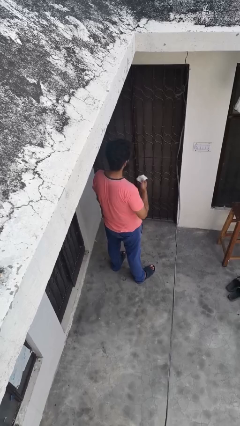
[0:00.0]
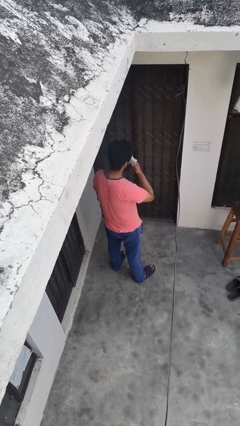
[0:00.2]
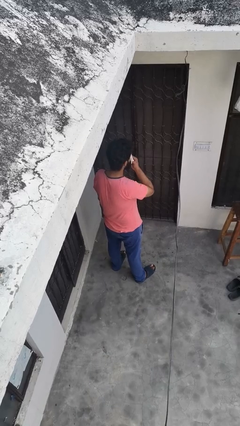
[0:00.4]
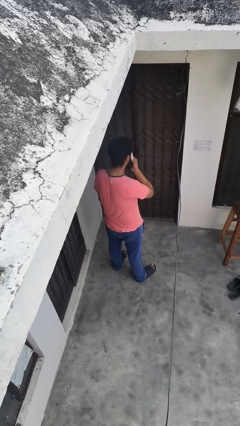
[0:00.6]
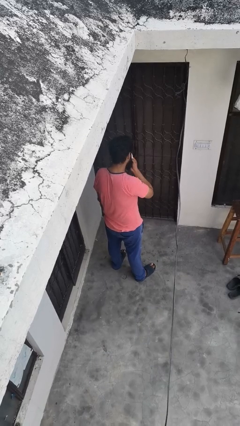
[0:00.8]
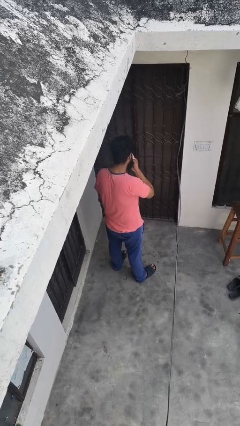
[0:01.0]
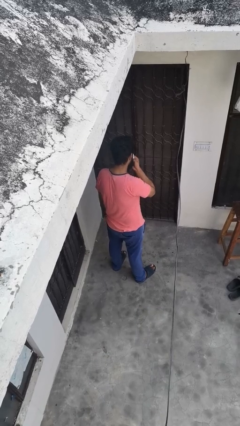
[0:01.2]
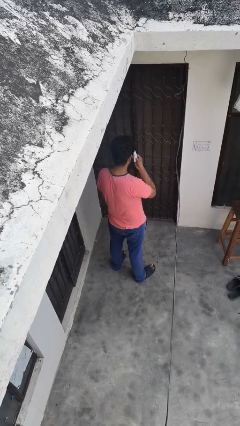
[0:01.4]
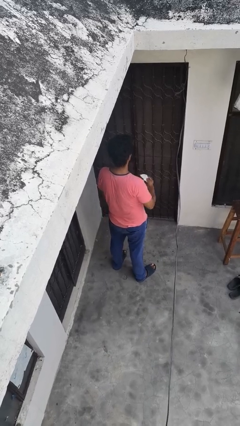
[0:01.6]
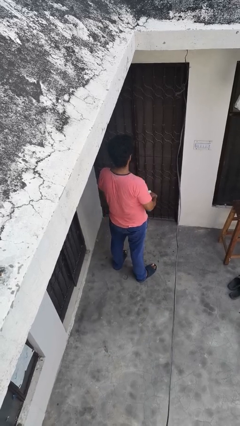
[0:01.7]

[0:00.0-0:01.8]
person wipes mouth with napkin

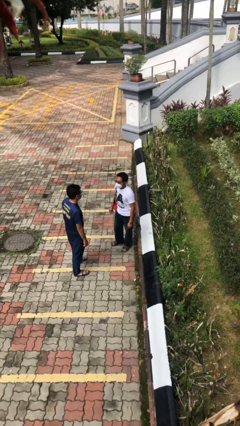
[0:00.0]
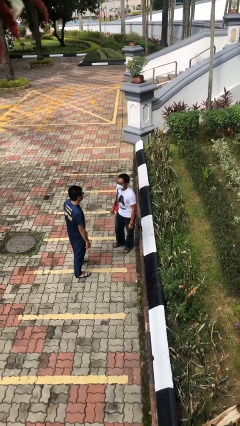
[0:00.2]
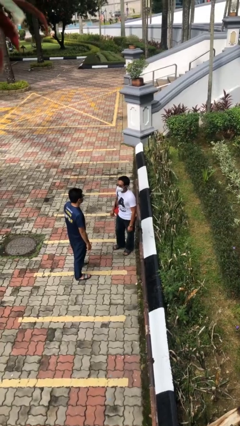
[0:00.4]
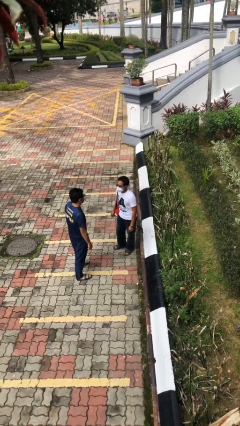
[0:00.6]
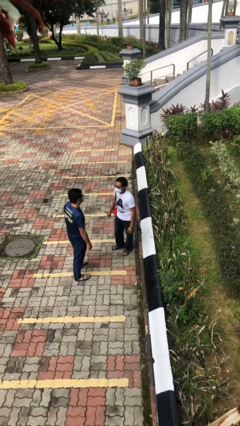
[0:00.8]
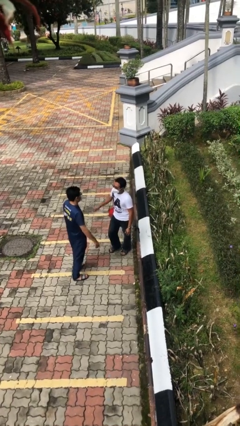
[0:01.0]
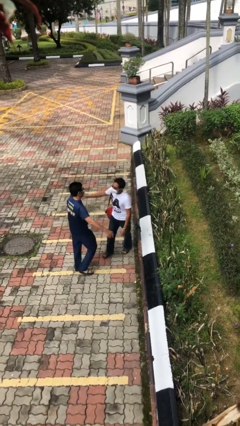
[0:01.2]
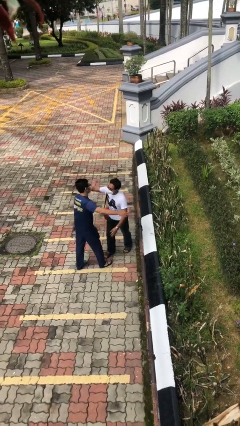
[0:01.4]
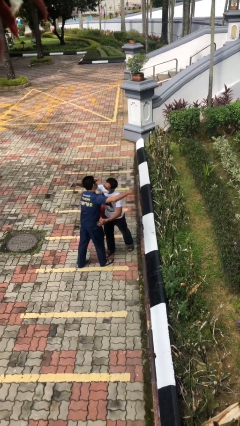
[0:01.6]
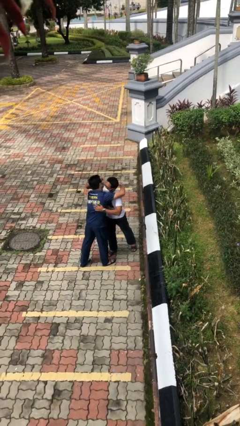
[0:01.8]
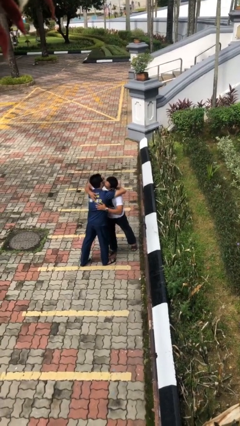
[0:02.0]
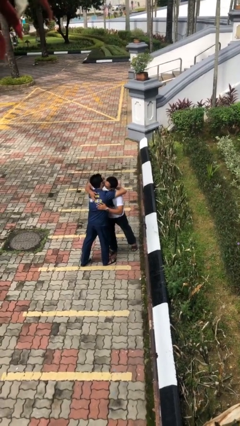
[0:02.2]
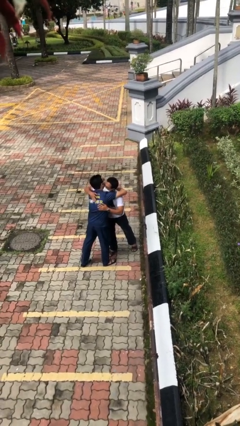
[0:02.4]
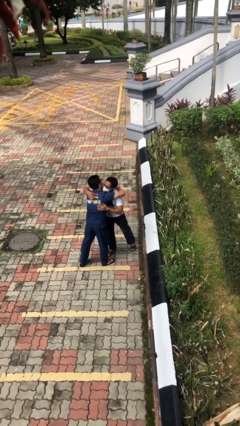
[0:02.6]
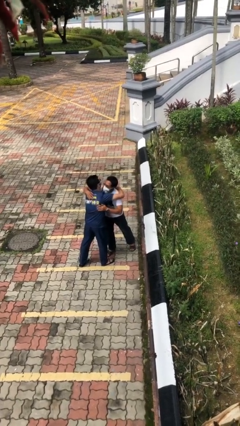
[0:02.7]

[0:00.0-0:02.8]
person embraces person

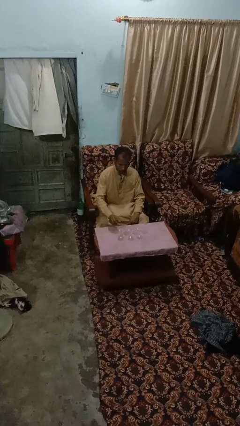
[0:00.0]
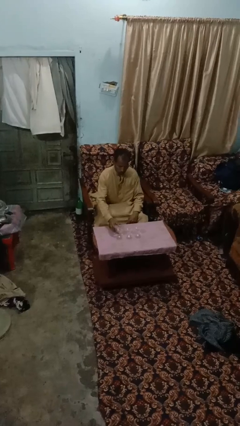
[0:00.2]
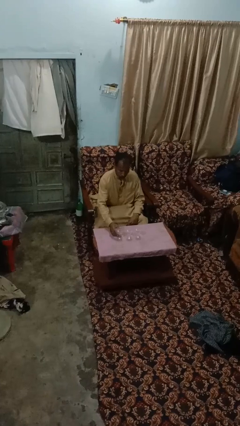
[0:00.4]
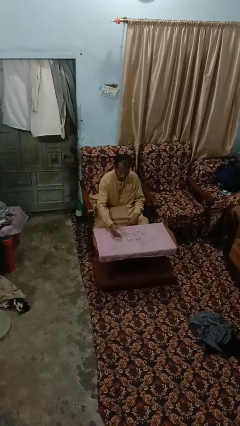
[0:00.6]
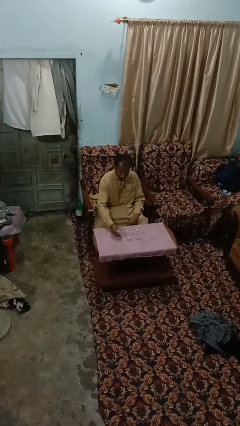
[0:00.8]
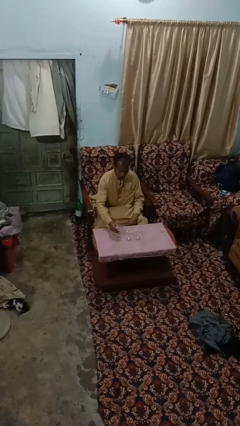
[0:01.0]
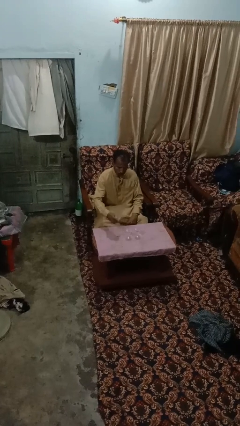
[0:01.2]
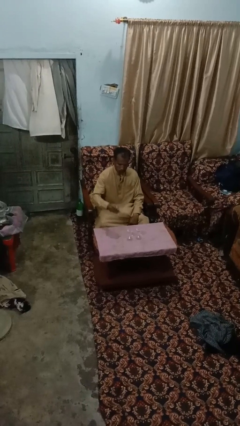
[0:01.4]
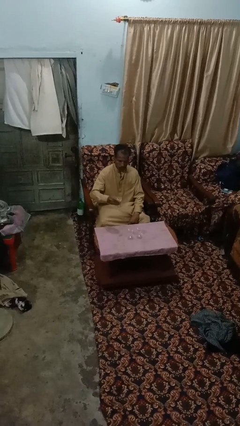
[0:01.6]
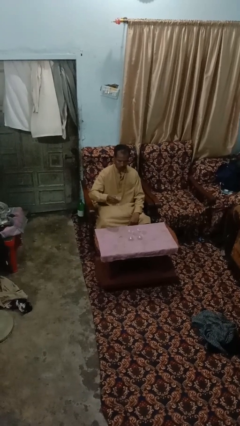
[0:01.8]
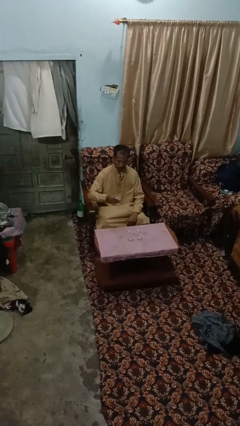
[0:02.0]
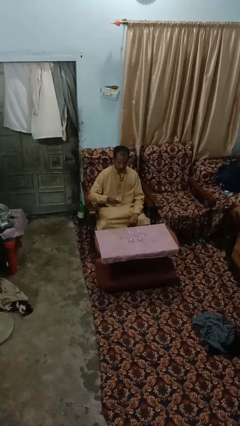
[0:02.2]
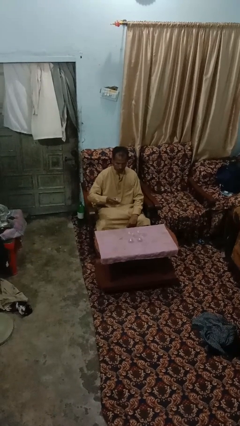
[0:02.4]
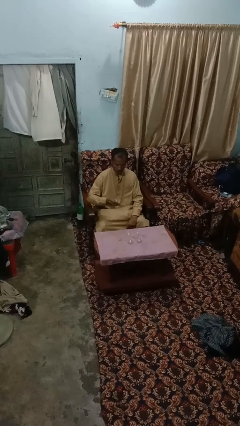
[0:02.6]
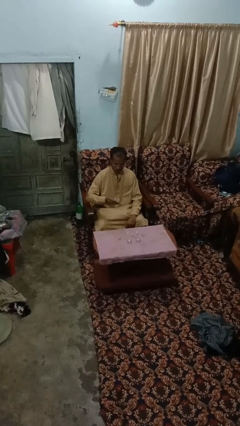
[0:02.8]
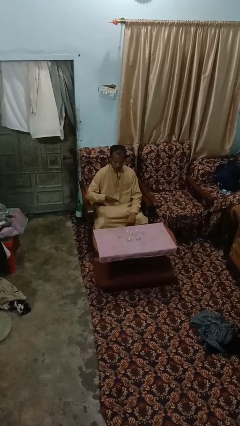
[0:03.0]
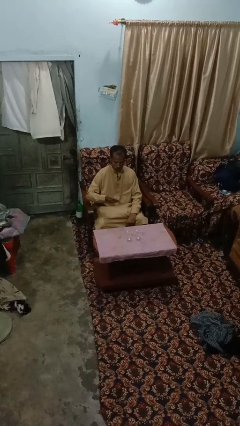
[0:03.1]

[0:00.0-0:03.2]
person picks up object from table

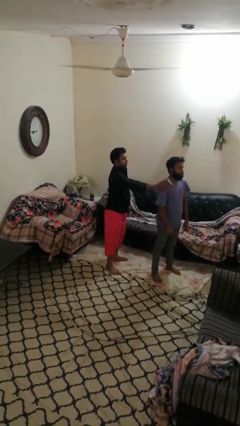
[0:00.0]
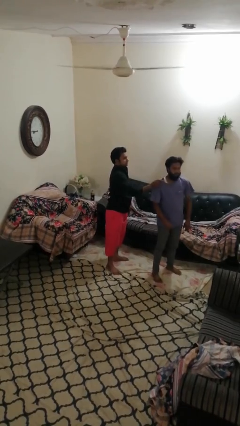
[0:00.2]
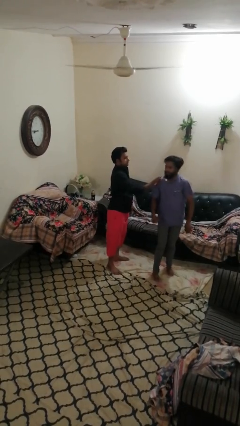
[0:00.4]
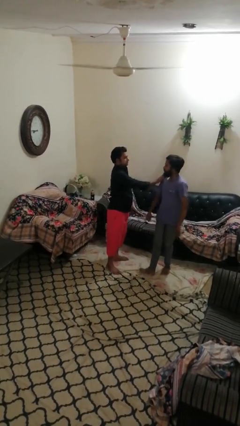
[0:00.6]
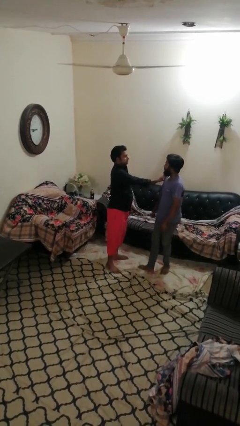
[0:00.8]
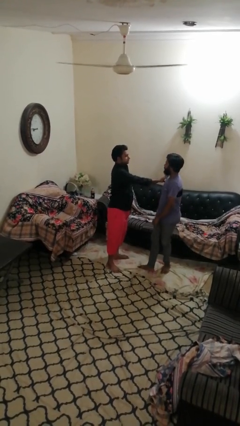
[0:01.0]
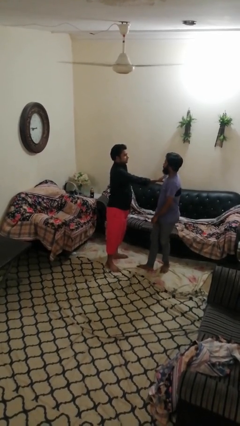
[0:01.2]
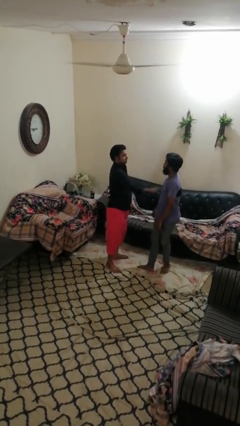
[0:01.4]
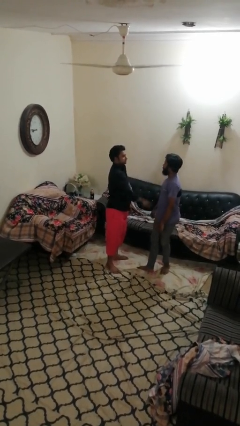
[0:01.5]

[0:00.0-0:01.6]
person spins person around

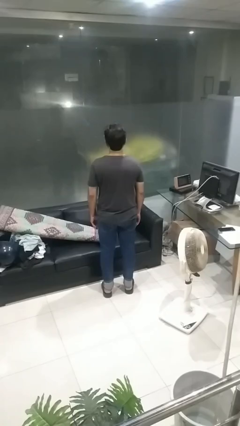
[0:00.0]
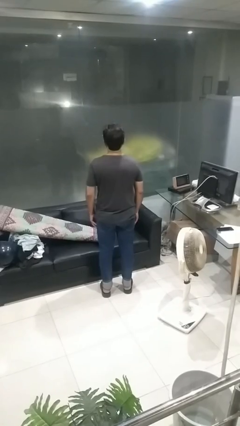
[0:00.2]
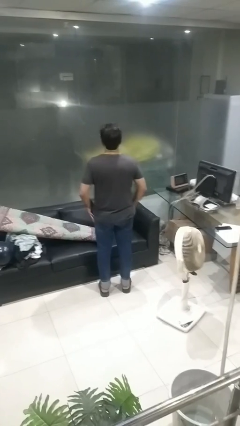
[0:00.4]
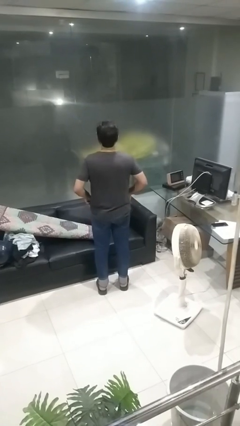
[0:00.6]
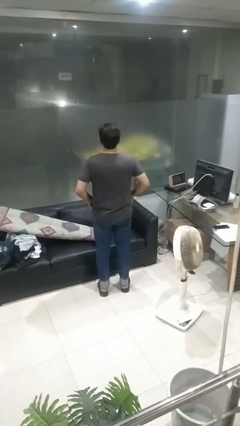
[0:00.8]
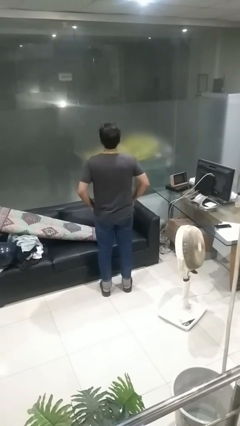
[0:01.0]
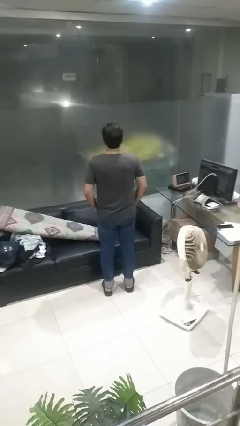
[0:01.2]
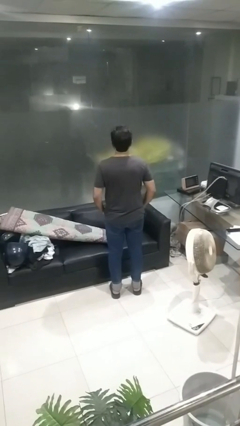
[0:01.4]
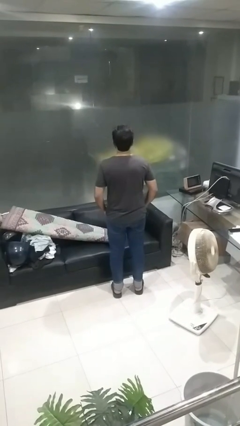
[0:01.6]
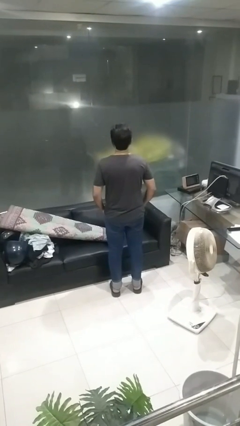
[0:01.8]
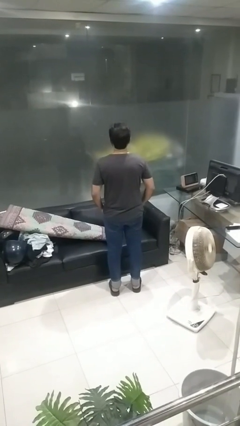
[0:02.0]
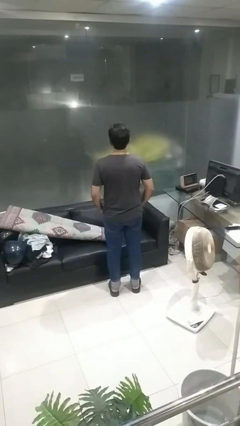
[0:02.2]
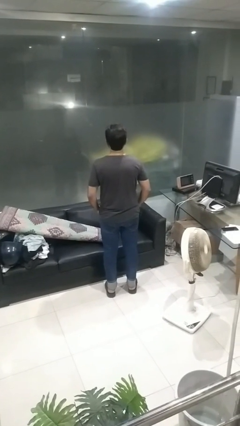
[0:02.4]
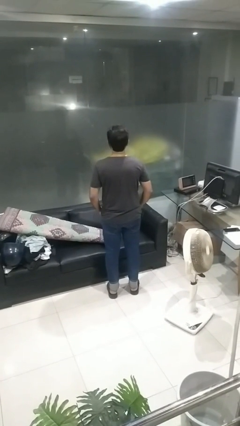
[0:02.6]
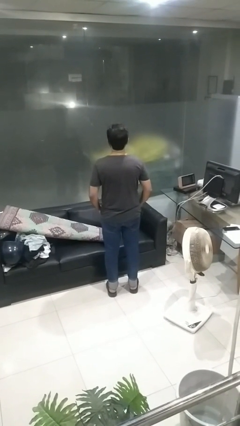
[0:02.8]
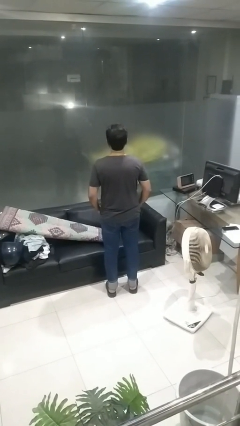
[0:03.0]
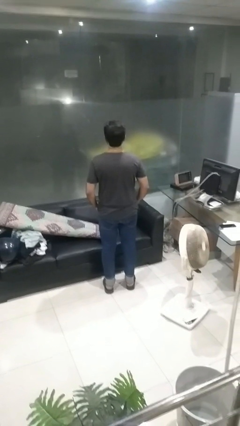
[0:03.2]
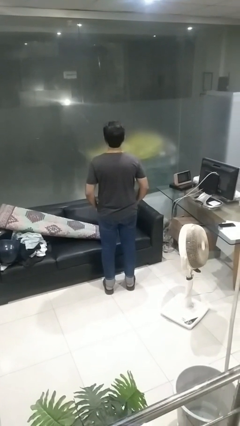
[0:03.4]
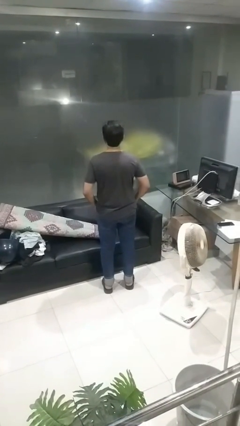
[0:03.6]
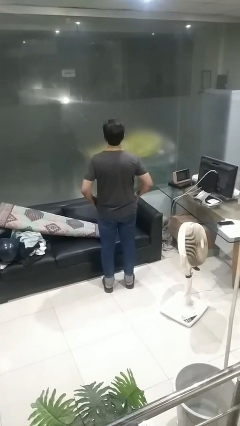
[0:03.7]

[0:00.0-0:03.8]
person puts hands in back pockets

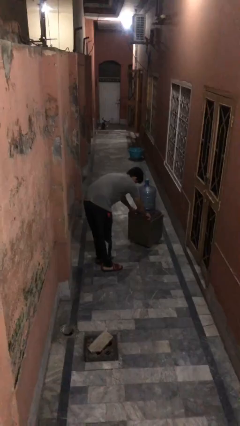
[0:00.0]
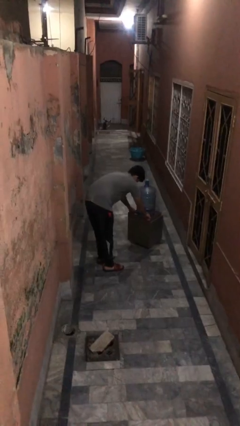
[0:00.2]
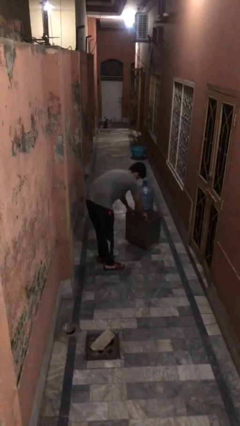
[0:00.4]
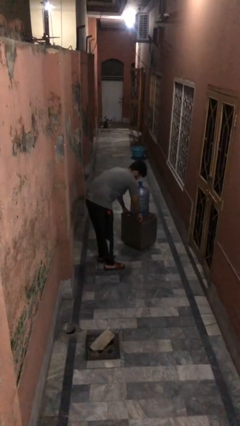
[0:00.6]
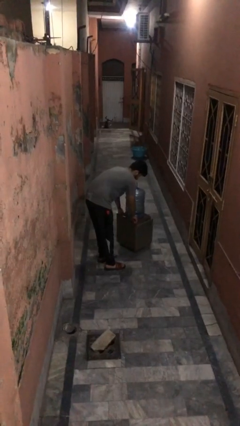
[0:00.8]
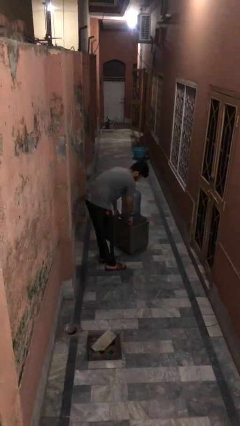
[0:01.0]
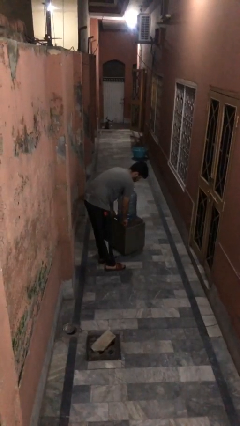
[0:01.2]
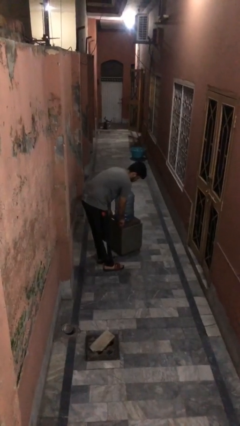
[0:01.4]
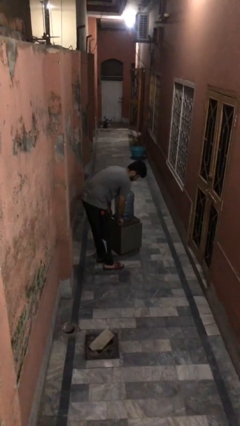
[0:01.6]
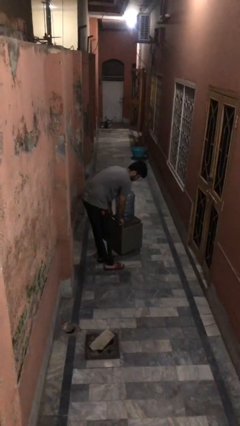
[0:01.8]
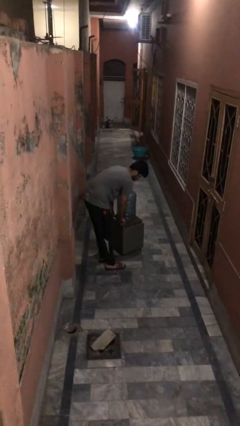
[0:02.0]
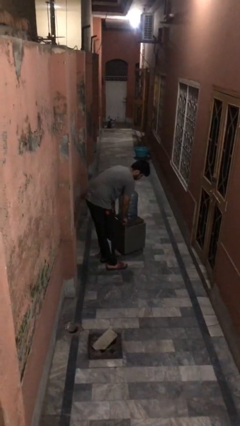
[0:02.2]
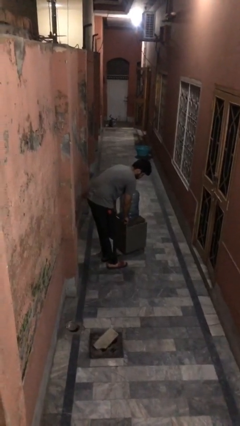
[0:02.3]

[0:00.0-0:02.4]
person pulls wheeled cart

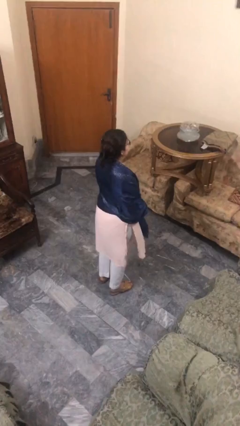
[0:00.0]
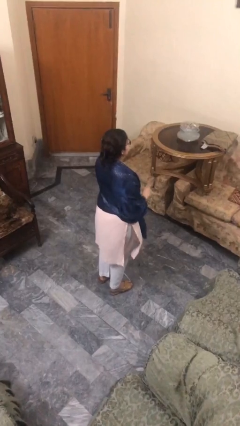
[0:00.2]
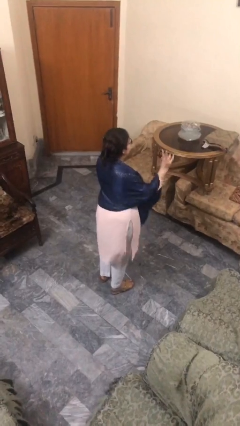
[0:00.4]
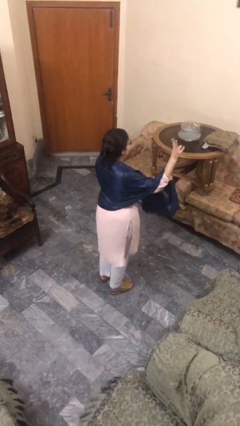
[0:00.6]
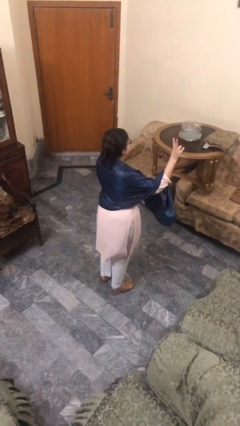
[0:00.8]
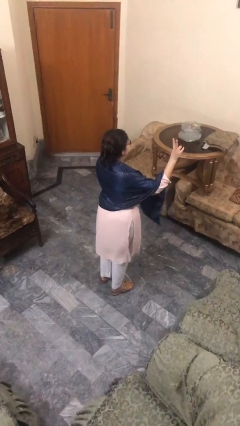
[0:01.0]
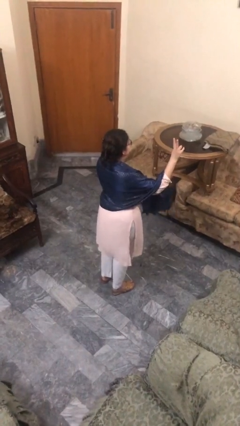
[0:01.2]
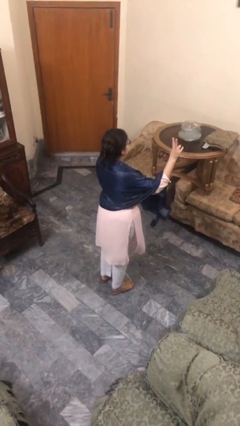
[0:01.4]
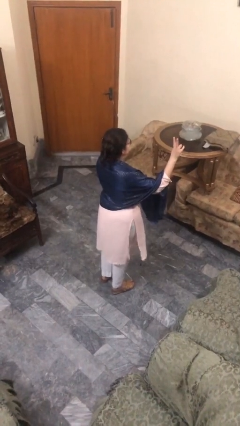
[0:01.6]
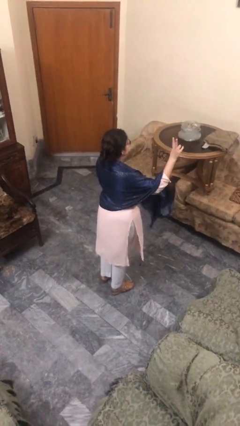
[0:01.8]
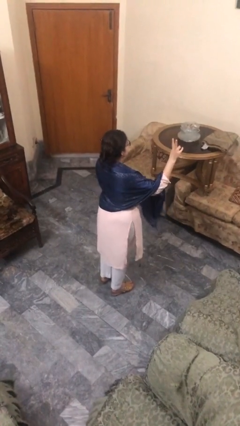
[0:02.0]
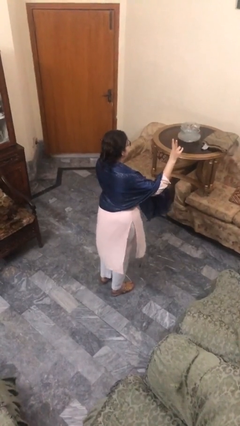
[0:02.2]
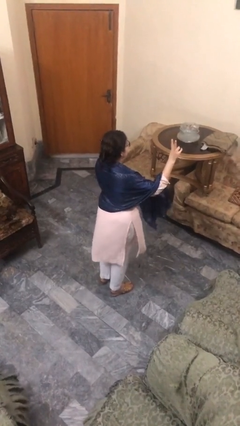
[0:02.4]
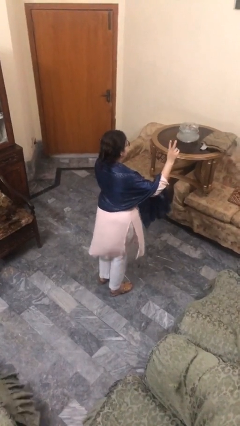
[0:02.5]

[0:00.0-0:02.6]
person gestures peace
